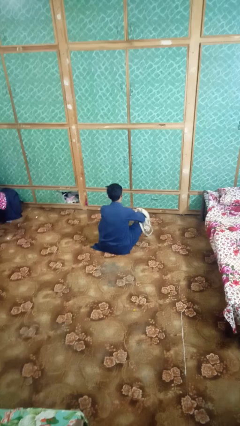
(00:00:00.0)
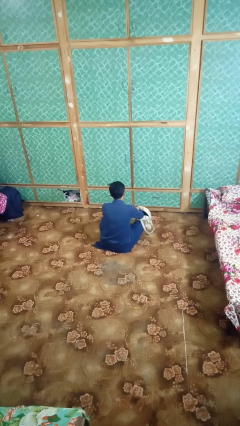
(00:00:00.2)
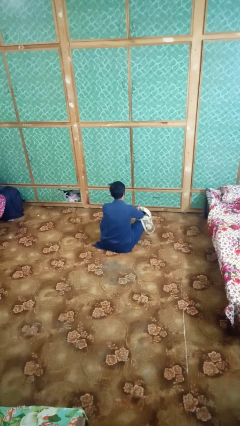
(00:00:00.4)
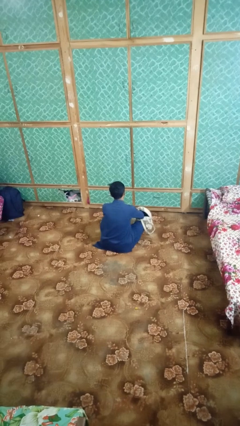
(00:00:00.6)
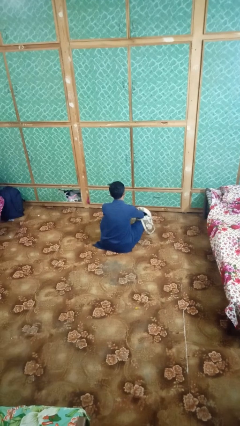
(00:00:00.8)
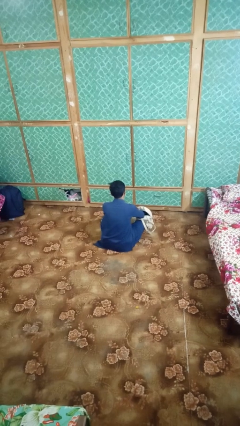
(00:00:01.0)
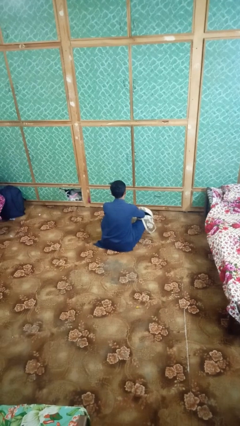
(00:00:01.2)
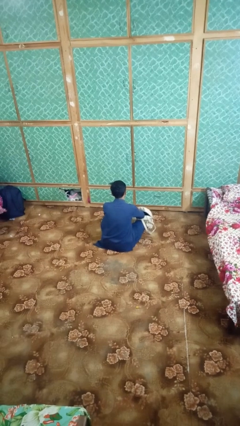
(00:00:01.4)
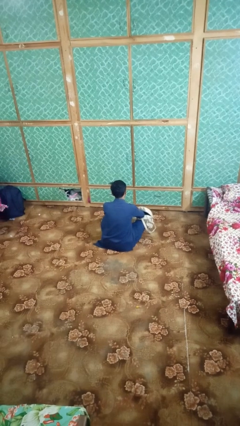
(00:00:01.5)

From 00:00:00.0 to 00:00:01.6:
person searches in bag

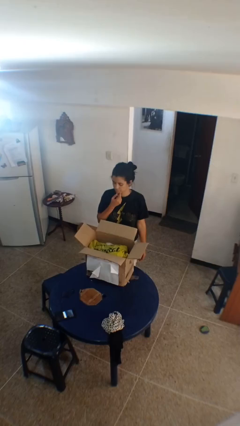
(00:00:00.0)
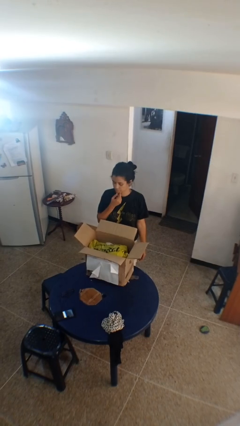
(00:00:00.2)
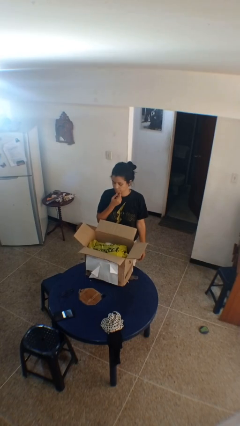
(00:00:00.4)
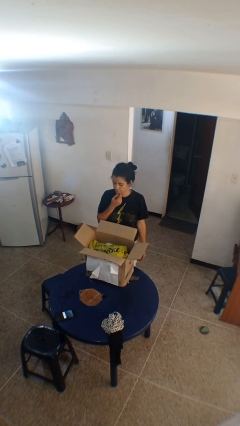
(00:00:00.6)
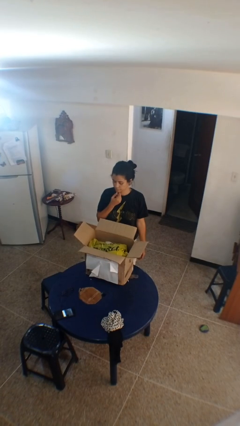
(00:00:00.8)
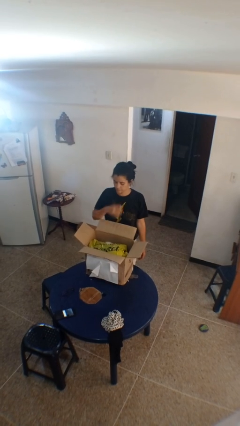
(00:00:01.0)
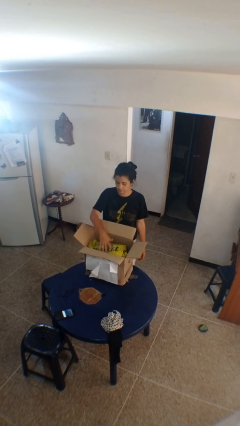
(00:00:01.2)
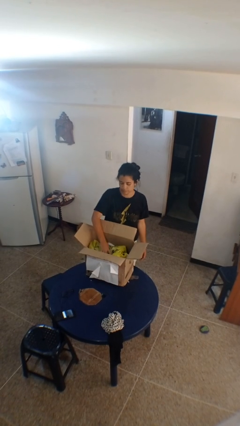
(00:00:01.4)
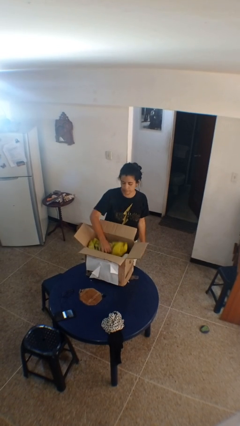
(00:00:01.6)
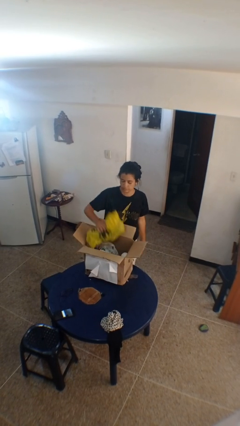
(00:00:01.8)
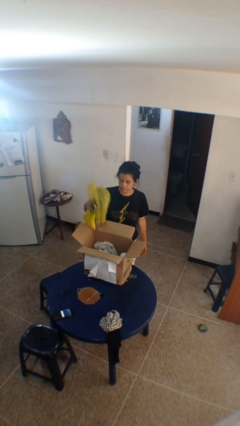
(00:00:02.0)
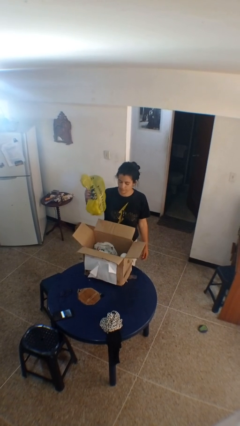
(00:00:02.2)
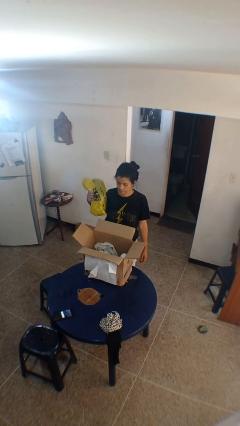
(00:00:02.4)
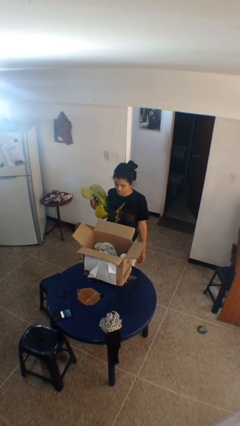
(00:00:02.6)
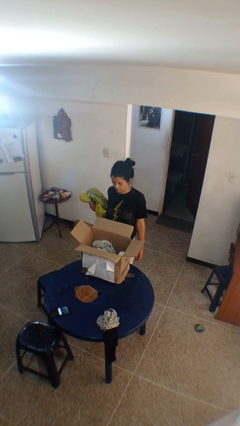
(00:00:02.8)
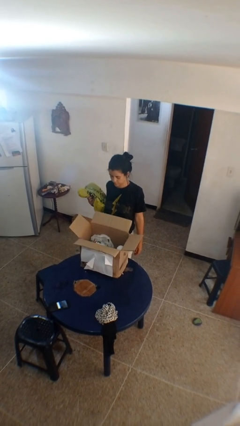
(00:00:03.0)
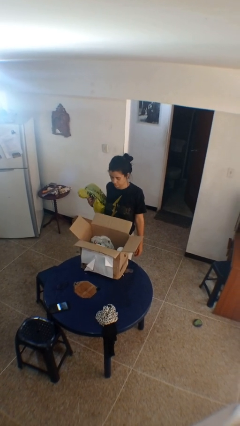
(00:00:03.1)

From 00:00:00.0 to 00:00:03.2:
person takes object from box

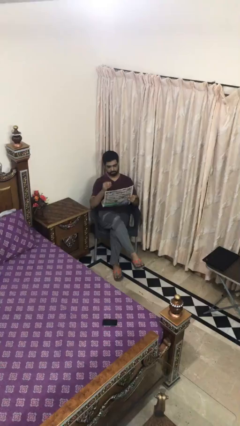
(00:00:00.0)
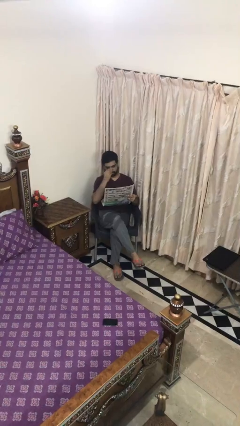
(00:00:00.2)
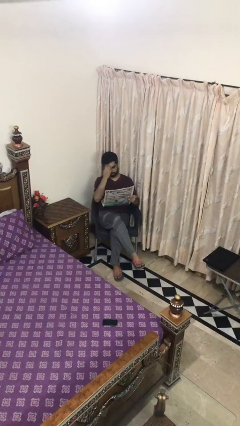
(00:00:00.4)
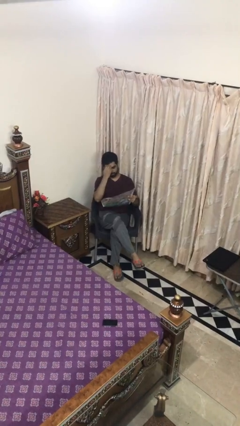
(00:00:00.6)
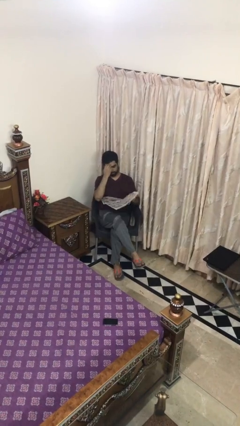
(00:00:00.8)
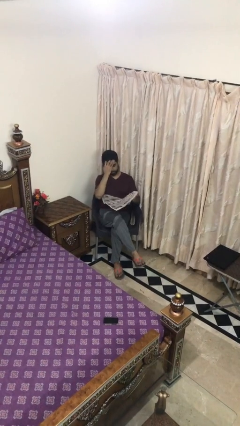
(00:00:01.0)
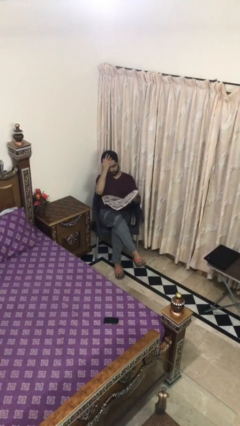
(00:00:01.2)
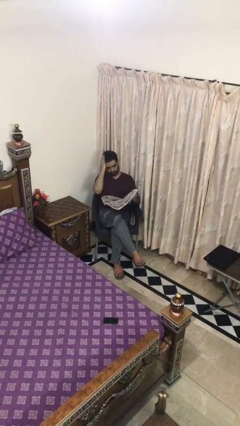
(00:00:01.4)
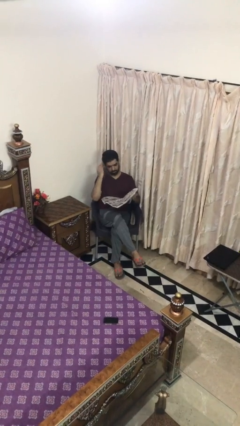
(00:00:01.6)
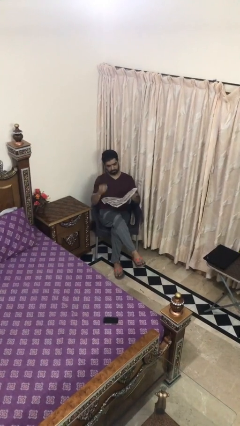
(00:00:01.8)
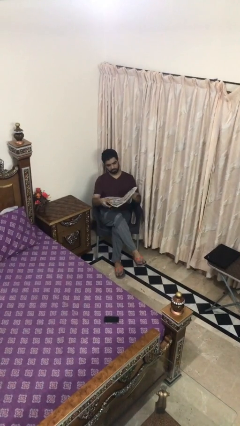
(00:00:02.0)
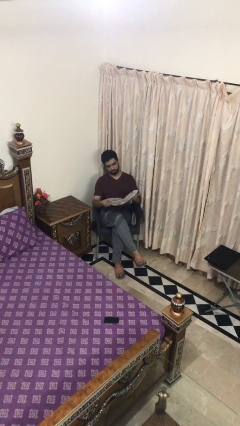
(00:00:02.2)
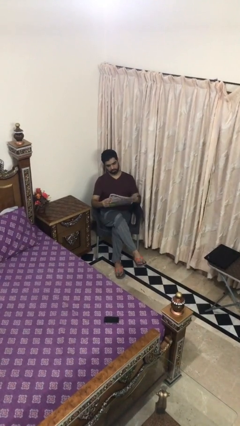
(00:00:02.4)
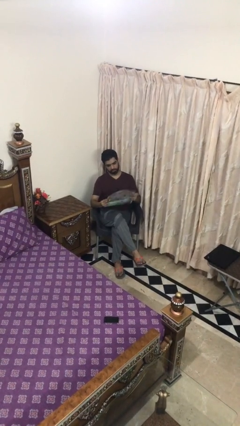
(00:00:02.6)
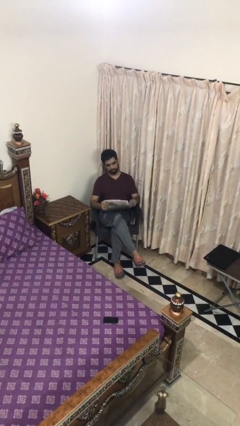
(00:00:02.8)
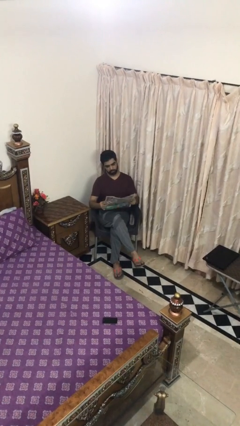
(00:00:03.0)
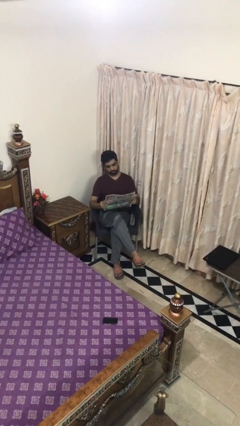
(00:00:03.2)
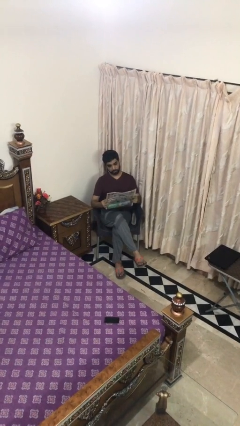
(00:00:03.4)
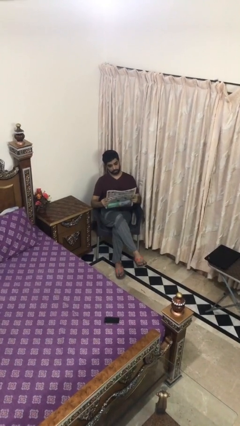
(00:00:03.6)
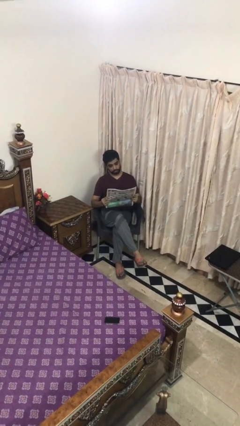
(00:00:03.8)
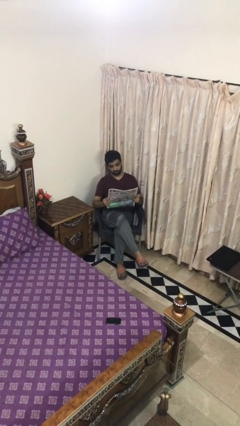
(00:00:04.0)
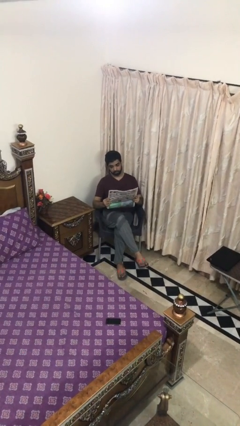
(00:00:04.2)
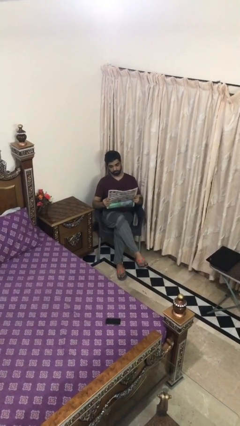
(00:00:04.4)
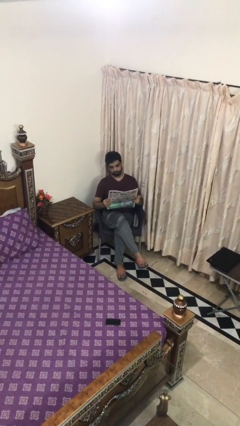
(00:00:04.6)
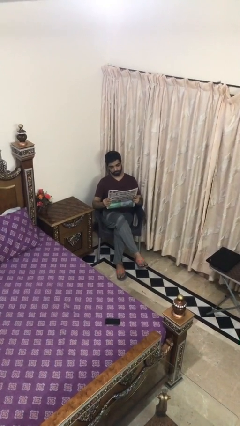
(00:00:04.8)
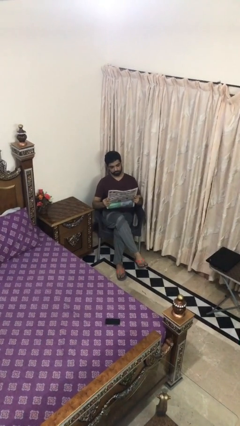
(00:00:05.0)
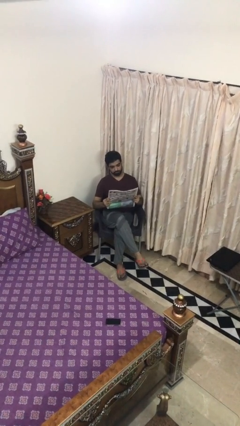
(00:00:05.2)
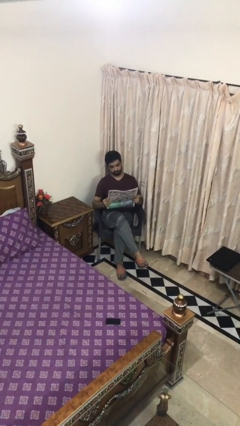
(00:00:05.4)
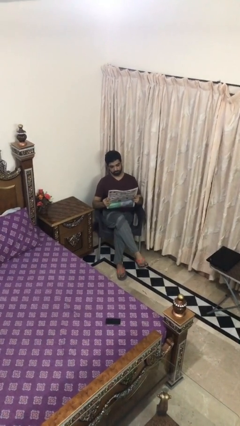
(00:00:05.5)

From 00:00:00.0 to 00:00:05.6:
person reads document

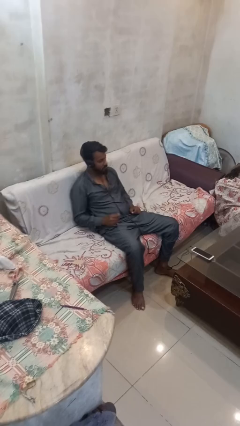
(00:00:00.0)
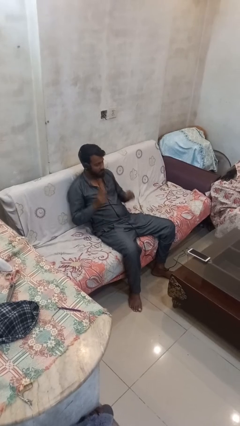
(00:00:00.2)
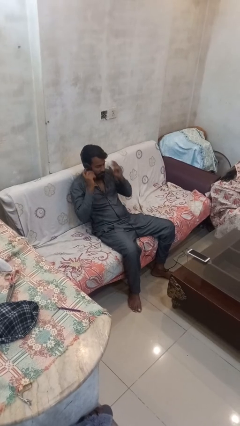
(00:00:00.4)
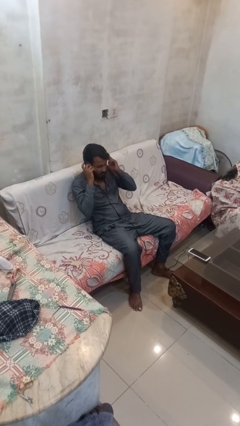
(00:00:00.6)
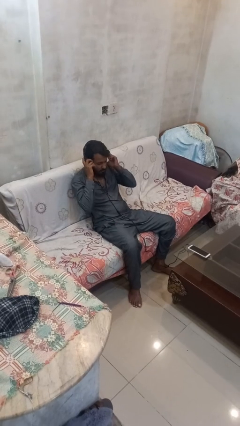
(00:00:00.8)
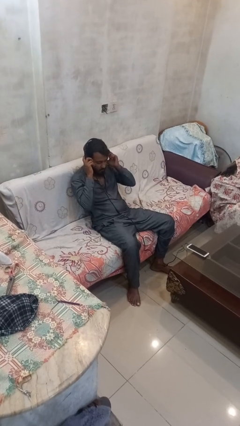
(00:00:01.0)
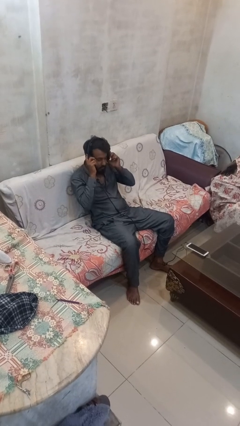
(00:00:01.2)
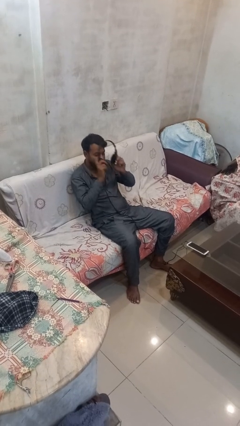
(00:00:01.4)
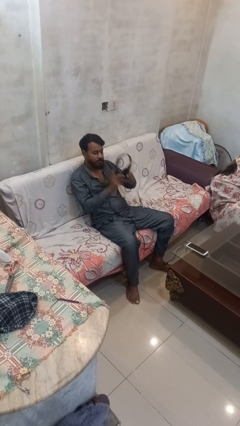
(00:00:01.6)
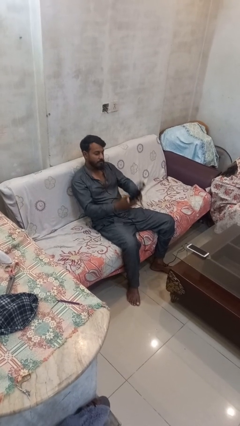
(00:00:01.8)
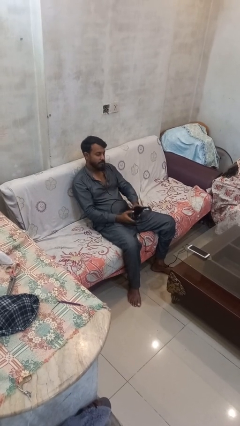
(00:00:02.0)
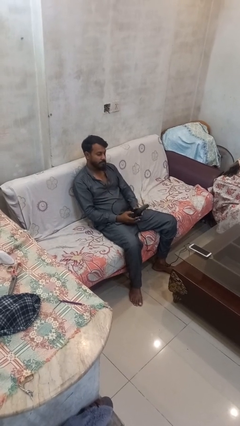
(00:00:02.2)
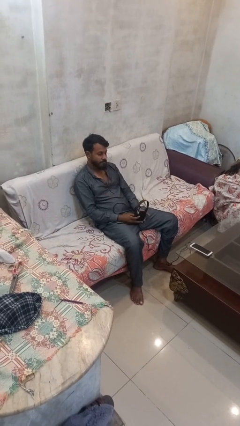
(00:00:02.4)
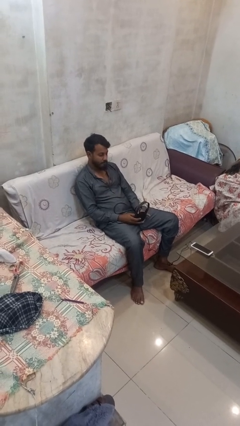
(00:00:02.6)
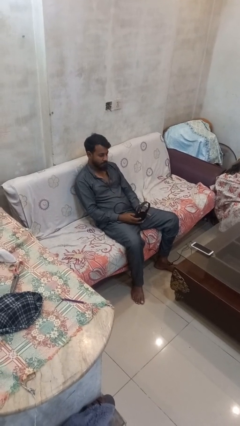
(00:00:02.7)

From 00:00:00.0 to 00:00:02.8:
person takes off headphones

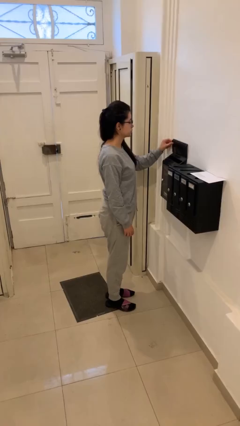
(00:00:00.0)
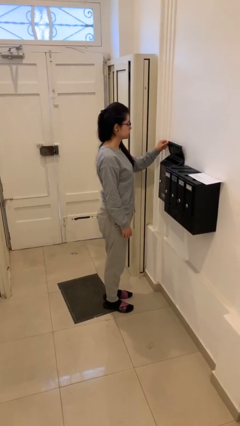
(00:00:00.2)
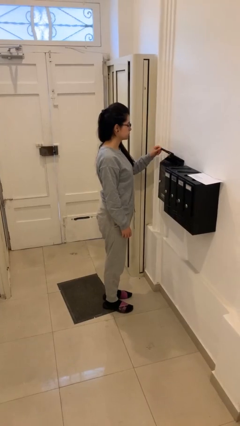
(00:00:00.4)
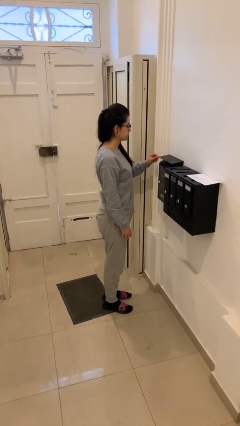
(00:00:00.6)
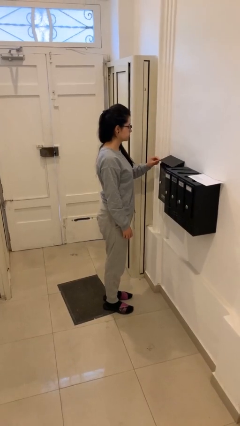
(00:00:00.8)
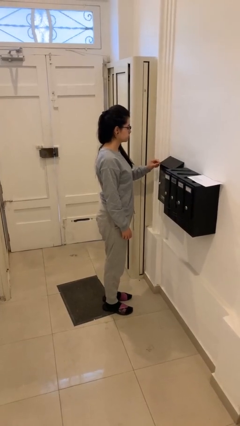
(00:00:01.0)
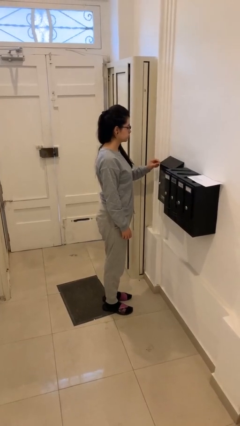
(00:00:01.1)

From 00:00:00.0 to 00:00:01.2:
person closes mailbox

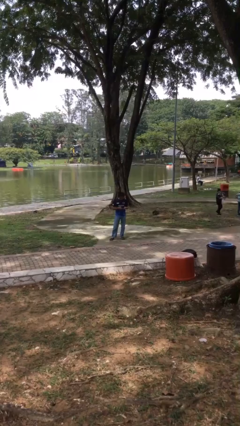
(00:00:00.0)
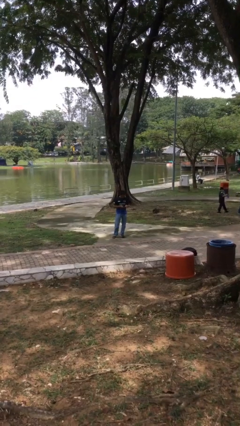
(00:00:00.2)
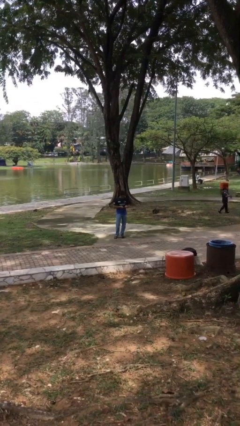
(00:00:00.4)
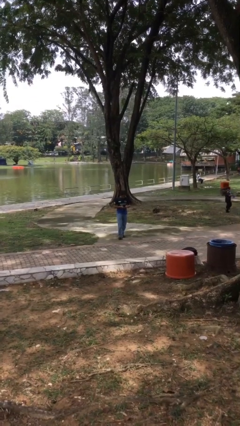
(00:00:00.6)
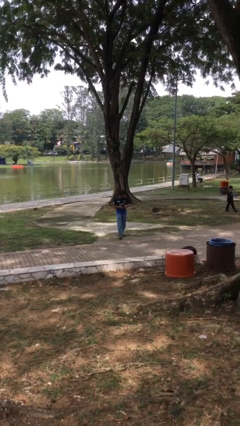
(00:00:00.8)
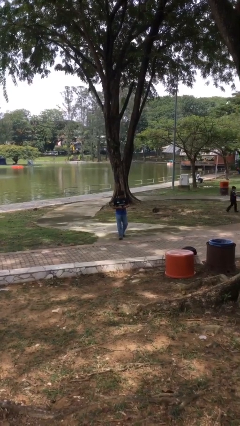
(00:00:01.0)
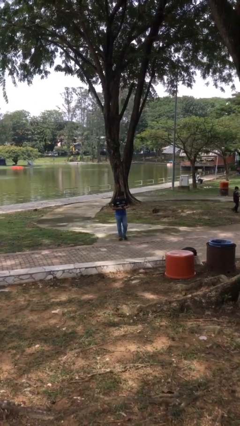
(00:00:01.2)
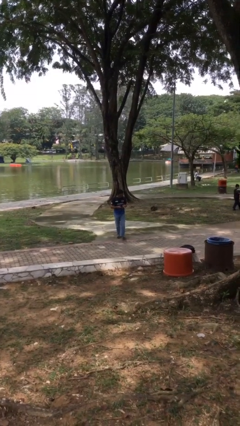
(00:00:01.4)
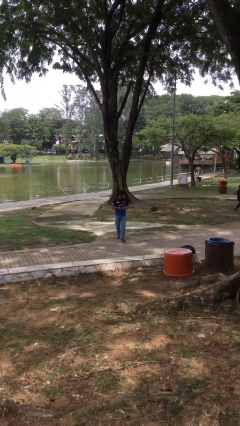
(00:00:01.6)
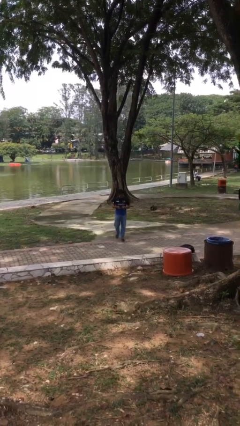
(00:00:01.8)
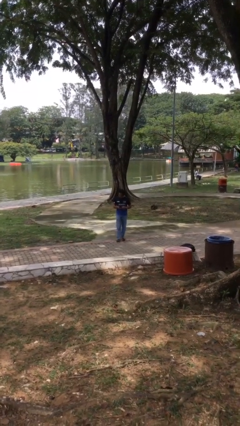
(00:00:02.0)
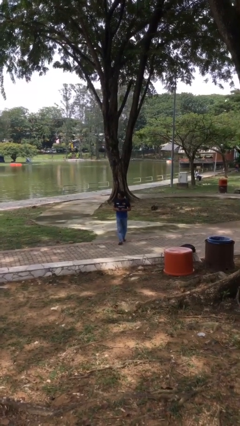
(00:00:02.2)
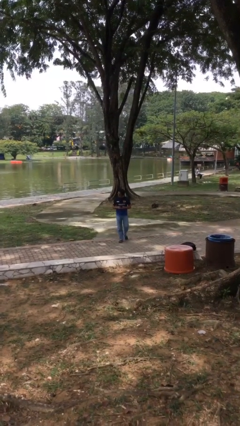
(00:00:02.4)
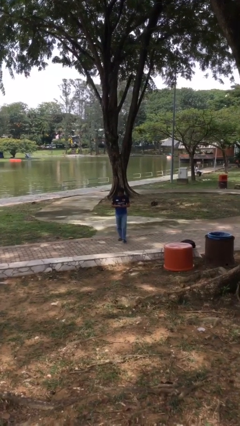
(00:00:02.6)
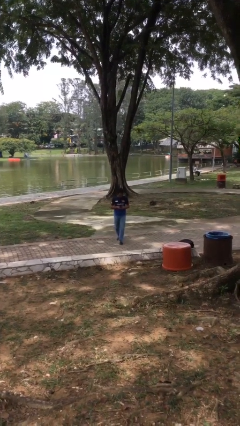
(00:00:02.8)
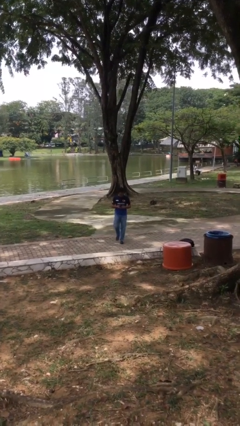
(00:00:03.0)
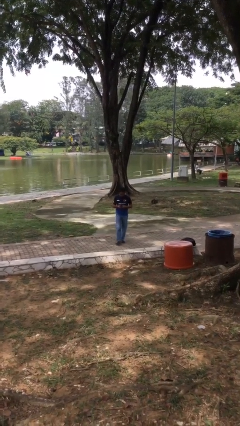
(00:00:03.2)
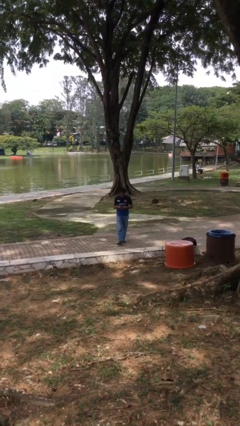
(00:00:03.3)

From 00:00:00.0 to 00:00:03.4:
person texts on phone
